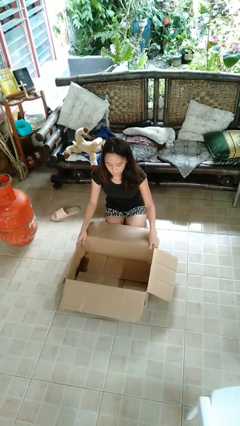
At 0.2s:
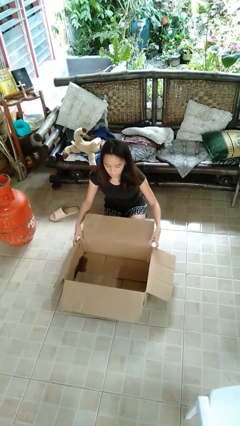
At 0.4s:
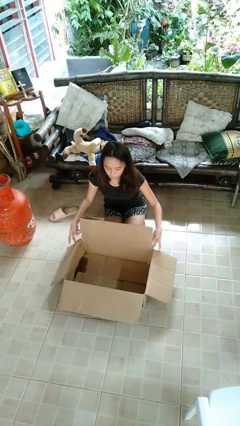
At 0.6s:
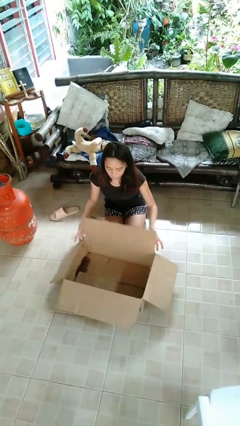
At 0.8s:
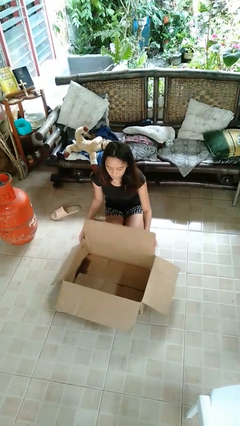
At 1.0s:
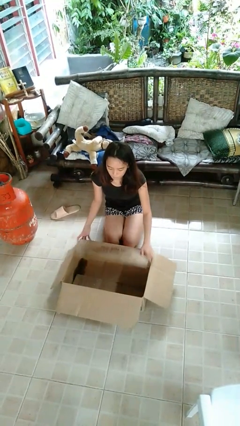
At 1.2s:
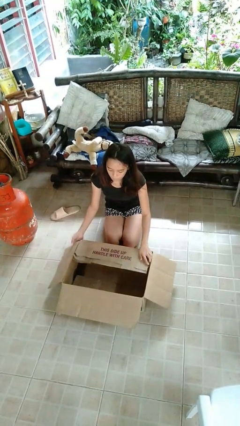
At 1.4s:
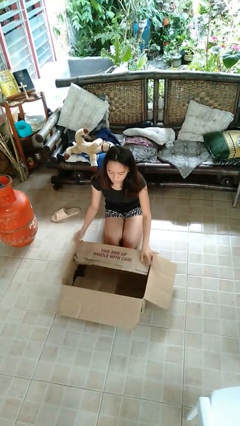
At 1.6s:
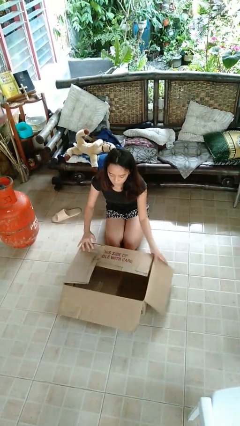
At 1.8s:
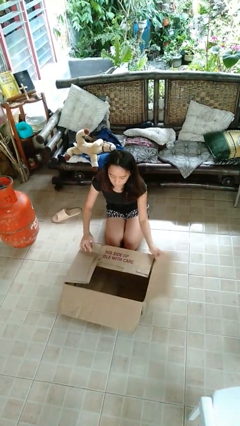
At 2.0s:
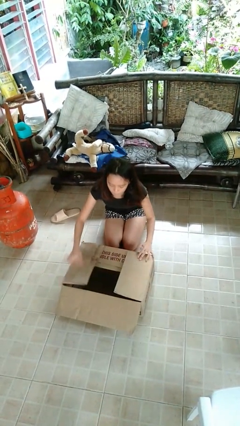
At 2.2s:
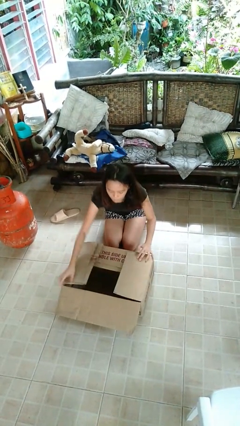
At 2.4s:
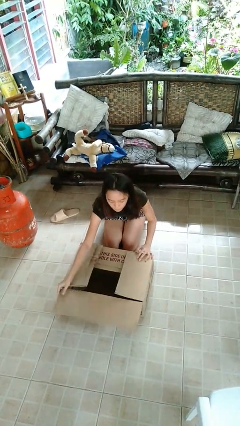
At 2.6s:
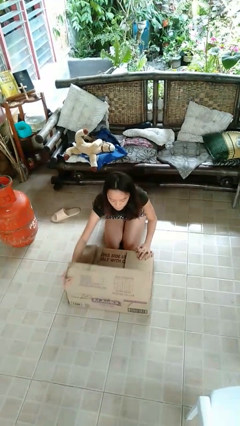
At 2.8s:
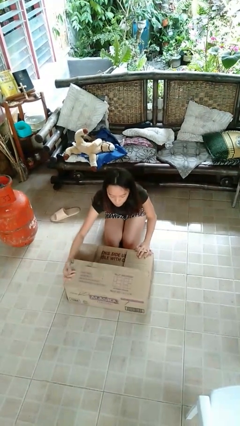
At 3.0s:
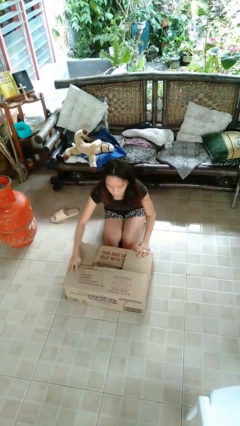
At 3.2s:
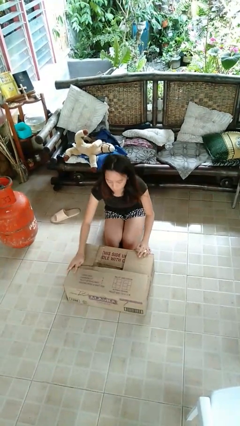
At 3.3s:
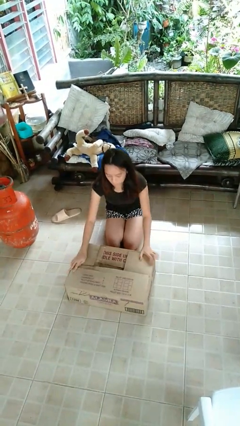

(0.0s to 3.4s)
person closes box

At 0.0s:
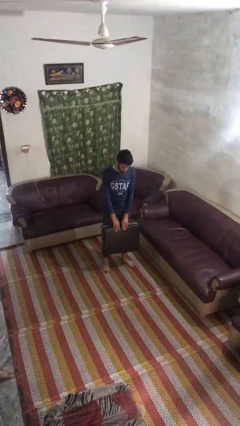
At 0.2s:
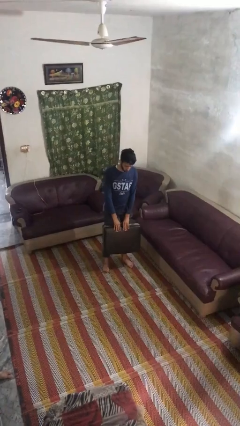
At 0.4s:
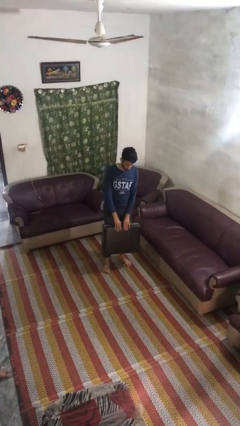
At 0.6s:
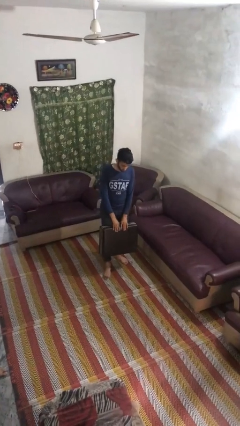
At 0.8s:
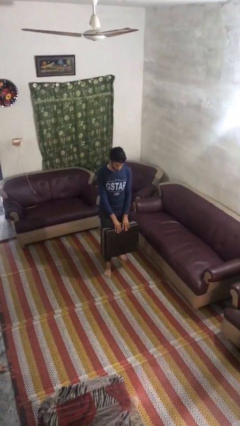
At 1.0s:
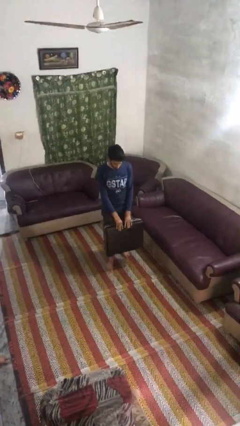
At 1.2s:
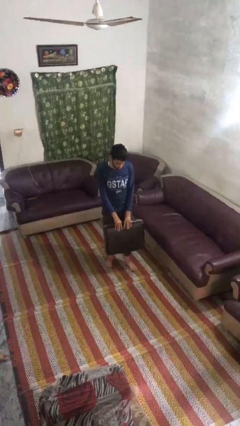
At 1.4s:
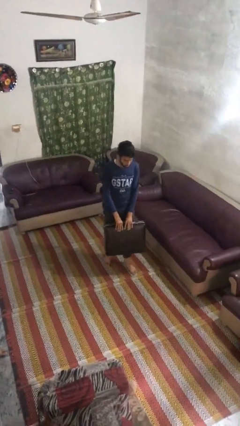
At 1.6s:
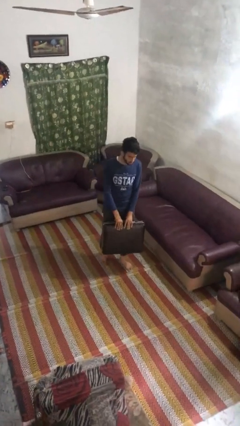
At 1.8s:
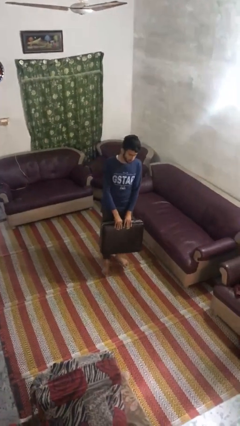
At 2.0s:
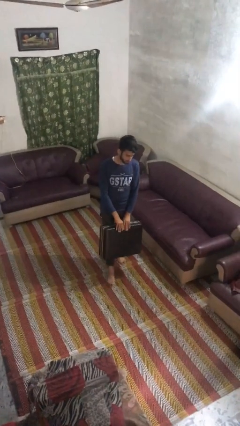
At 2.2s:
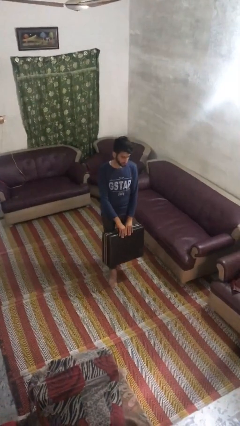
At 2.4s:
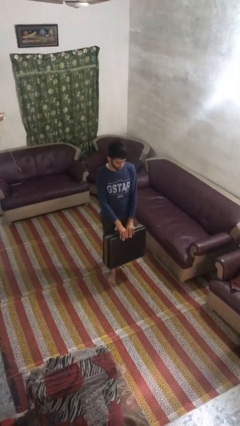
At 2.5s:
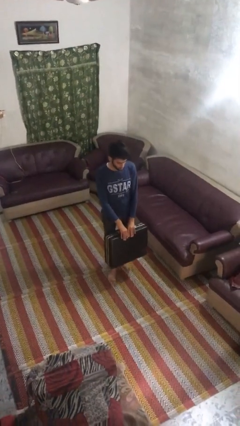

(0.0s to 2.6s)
person carries heavy object

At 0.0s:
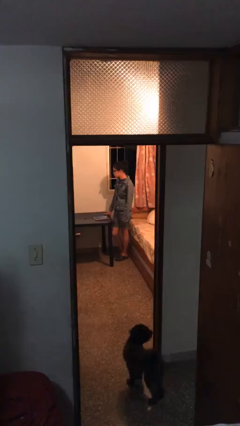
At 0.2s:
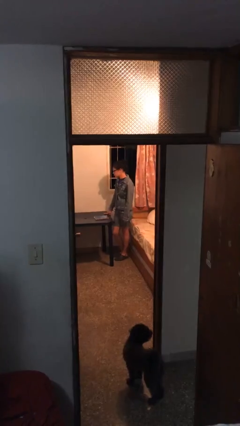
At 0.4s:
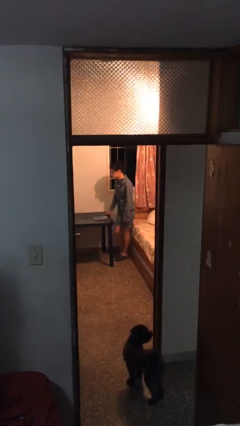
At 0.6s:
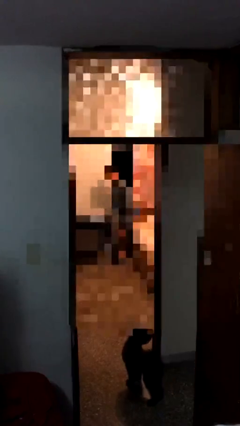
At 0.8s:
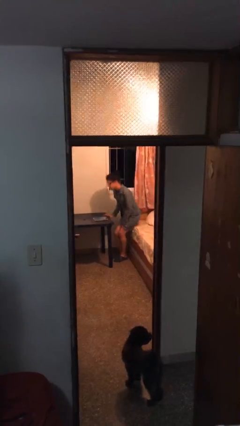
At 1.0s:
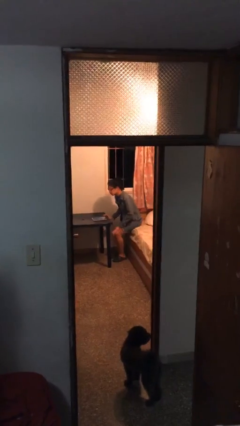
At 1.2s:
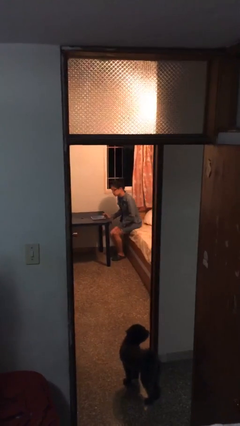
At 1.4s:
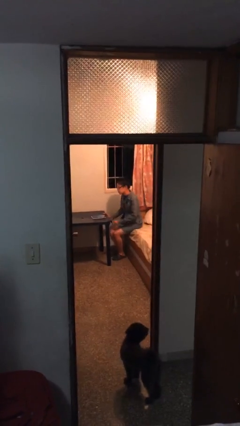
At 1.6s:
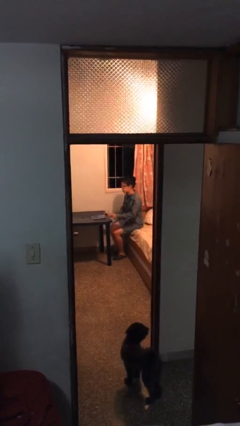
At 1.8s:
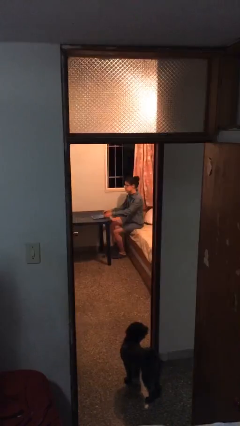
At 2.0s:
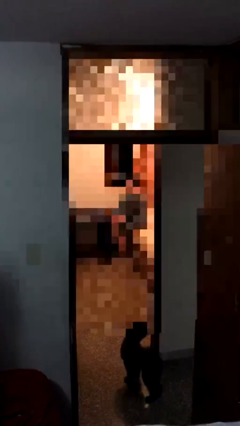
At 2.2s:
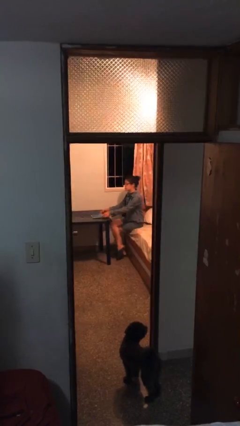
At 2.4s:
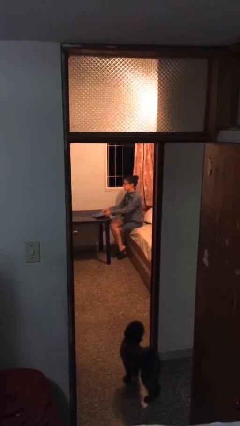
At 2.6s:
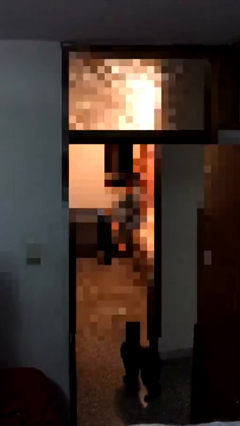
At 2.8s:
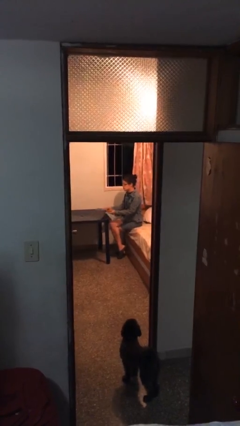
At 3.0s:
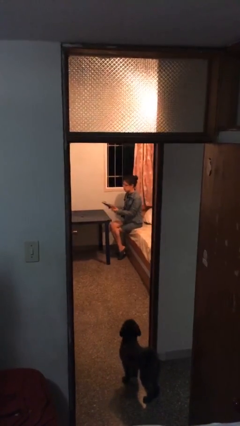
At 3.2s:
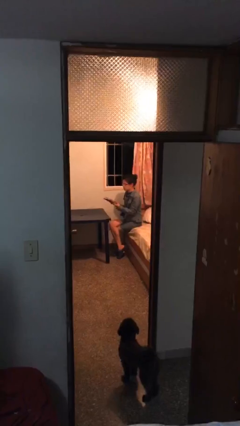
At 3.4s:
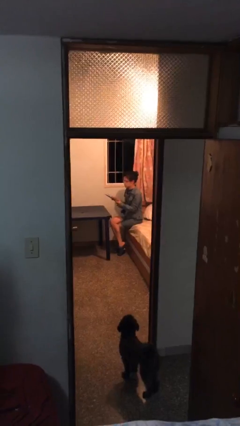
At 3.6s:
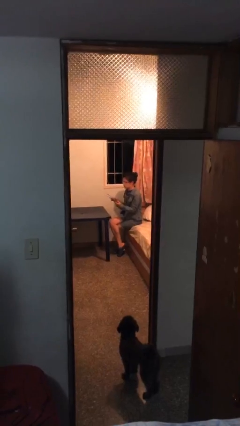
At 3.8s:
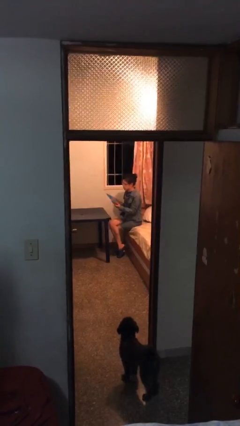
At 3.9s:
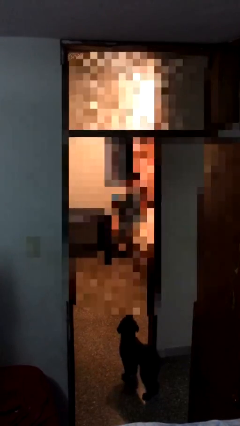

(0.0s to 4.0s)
person sits down

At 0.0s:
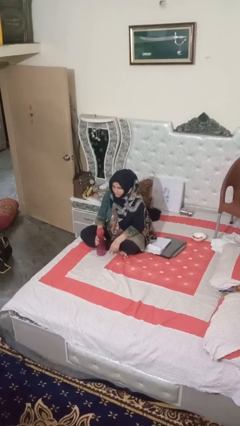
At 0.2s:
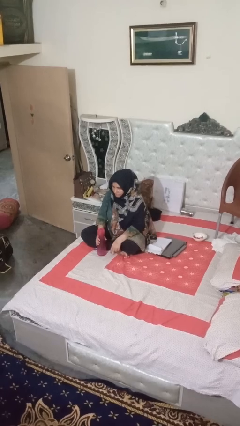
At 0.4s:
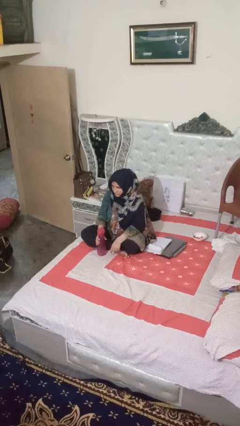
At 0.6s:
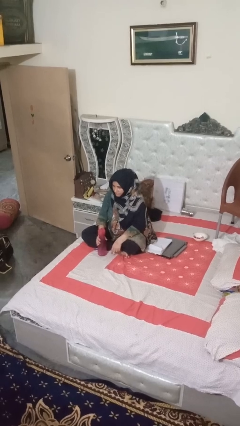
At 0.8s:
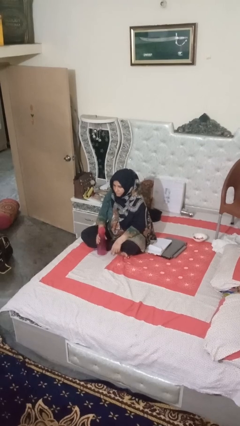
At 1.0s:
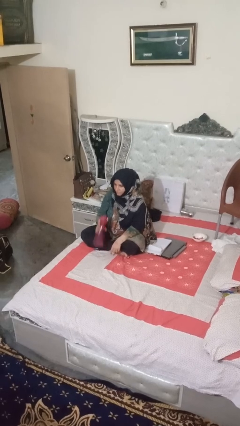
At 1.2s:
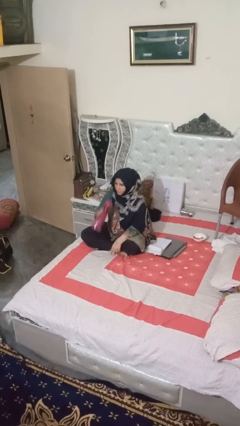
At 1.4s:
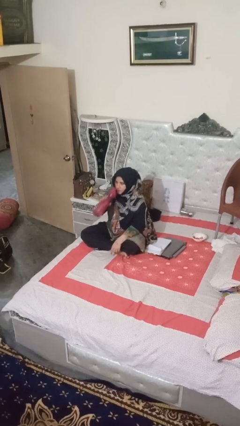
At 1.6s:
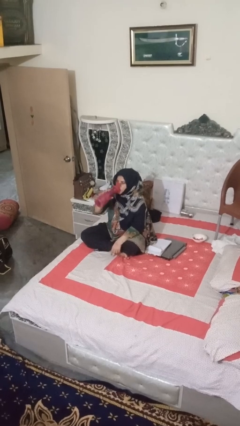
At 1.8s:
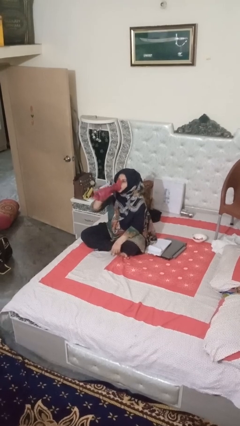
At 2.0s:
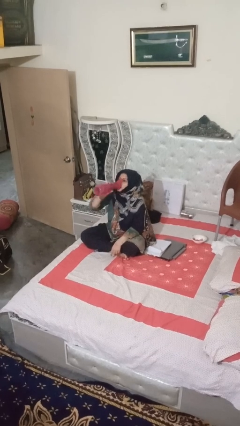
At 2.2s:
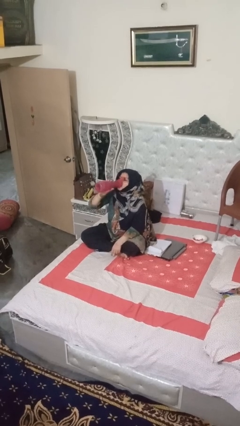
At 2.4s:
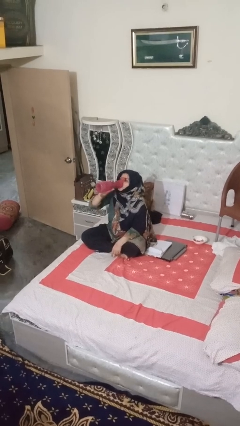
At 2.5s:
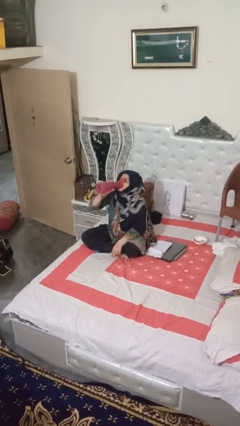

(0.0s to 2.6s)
person drinks from bottle

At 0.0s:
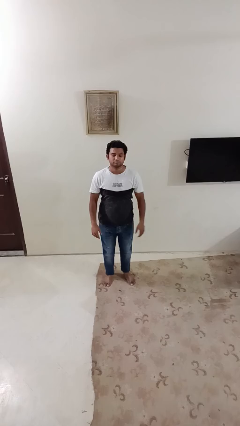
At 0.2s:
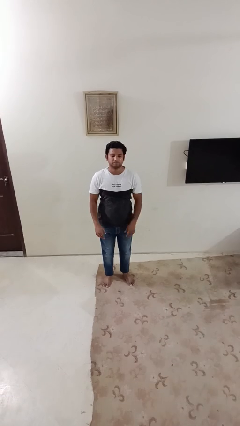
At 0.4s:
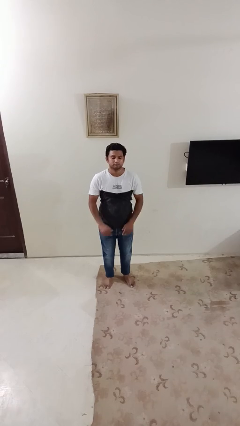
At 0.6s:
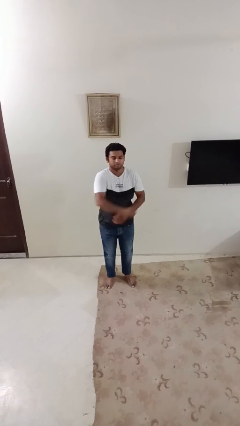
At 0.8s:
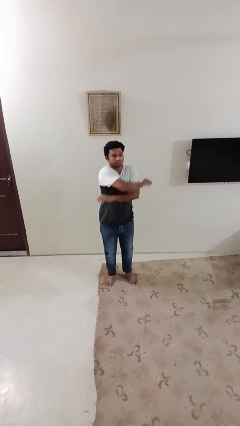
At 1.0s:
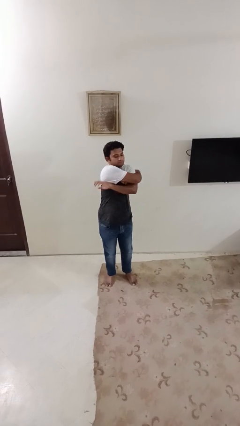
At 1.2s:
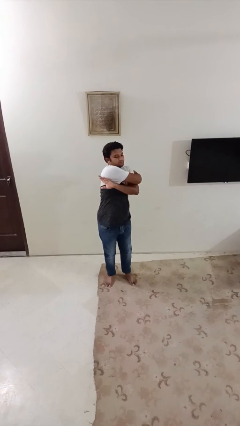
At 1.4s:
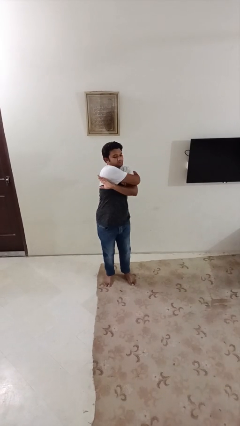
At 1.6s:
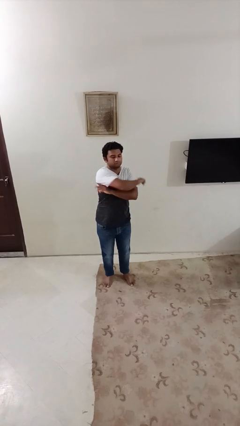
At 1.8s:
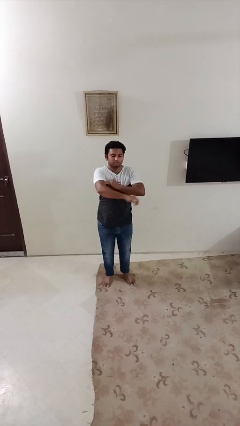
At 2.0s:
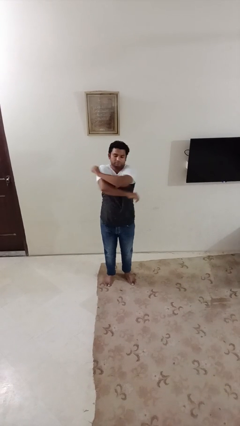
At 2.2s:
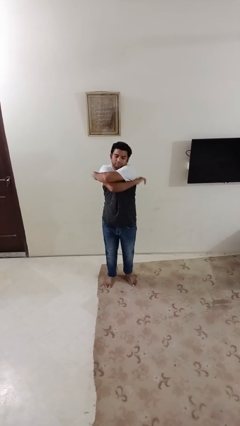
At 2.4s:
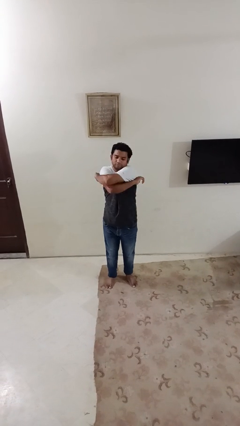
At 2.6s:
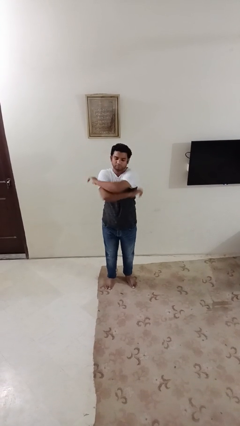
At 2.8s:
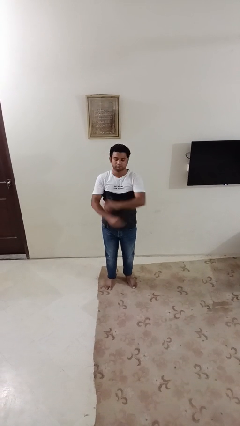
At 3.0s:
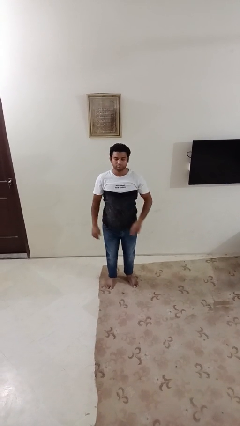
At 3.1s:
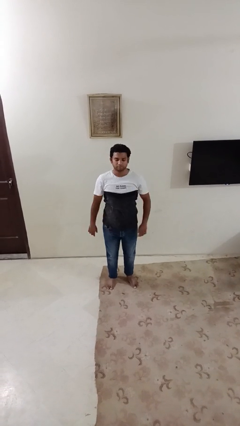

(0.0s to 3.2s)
person stretches arms to side

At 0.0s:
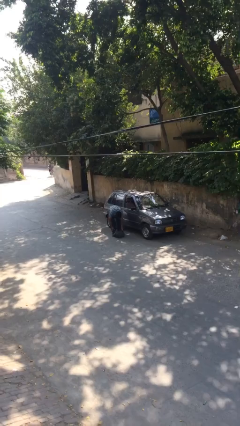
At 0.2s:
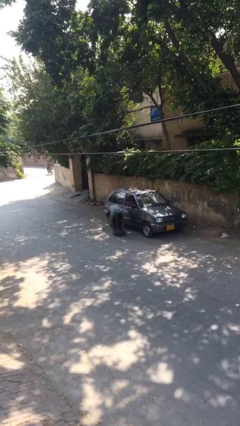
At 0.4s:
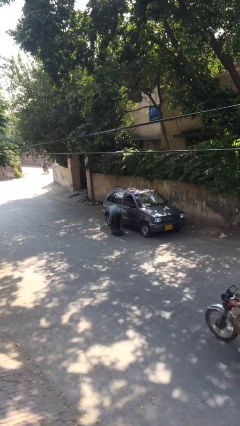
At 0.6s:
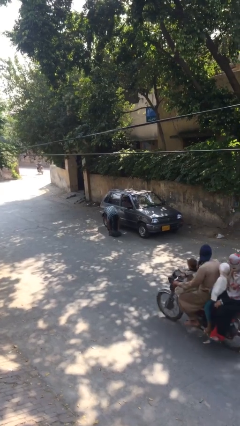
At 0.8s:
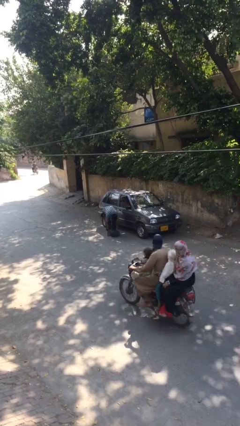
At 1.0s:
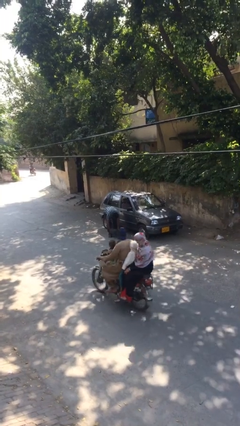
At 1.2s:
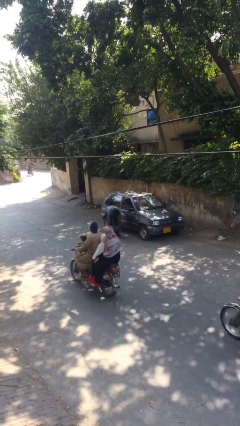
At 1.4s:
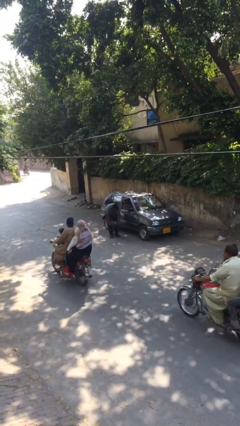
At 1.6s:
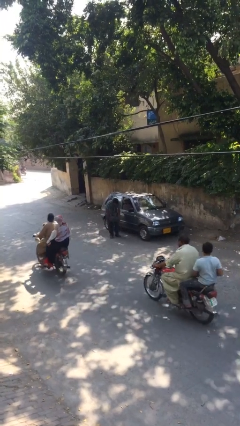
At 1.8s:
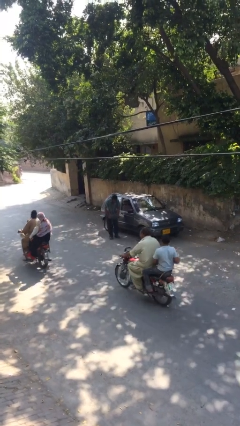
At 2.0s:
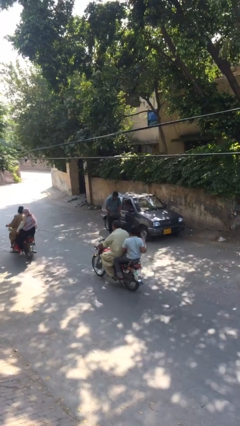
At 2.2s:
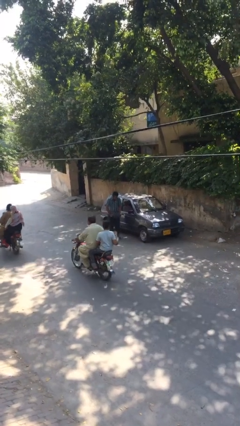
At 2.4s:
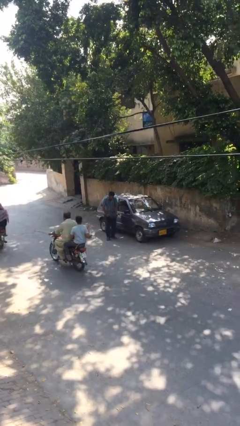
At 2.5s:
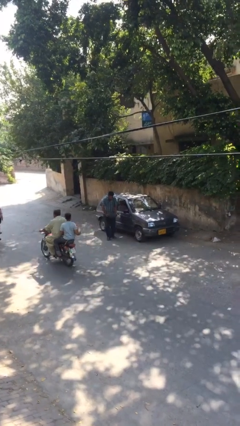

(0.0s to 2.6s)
person picks up object from floor
